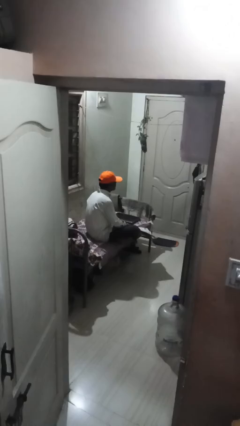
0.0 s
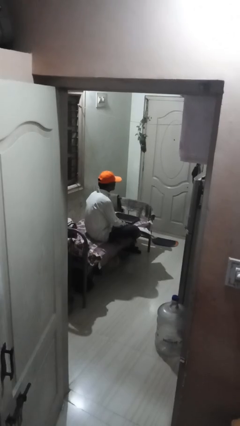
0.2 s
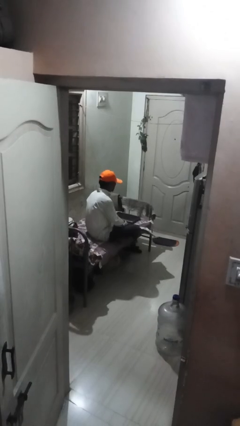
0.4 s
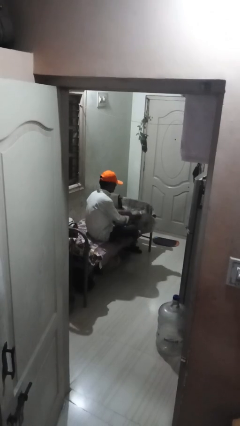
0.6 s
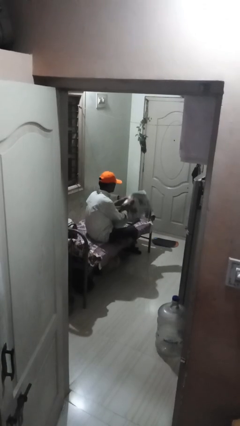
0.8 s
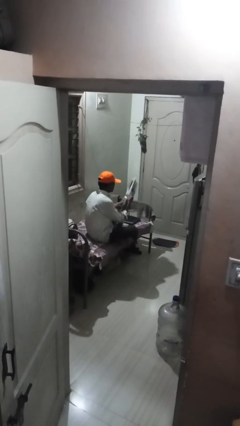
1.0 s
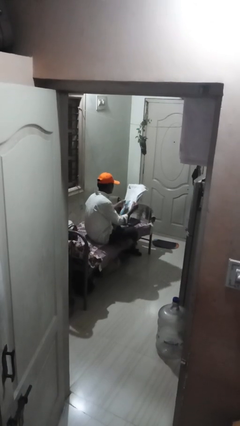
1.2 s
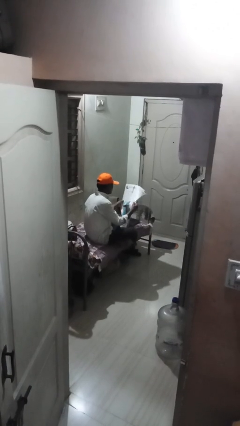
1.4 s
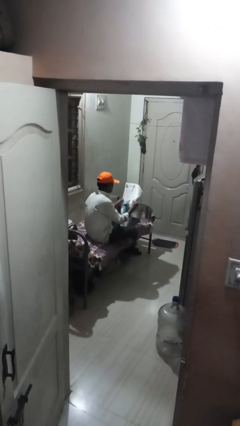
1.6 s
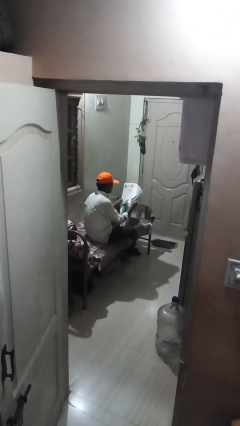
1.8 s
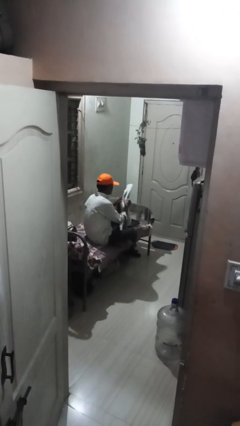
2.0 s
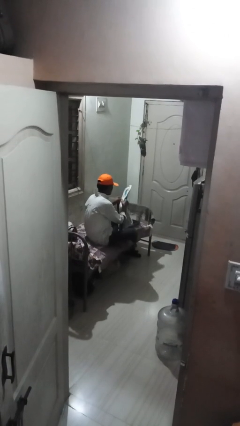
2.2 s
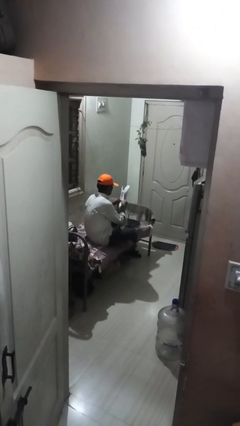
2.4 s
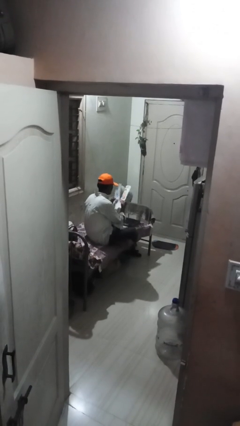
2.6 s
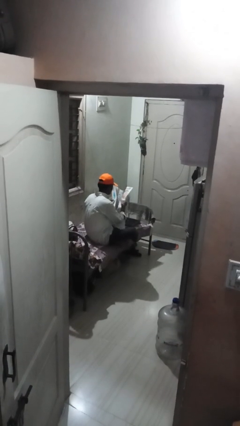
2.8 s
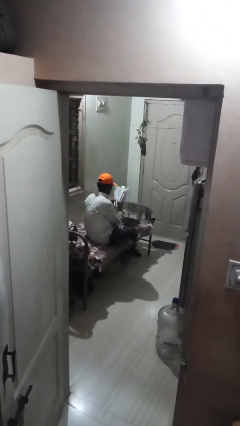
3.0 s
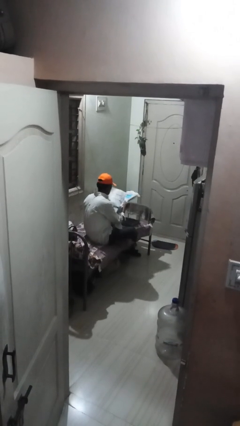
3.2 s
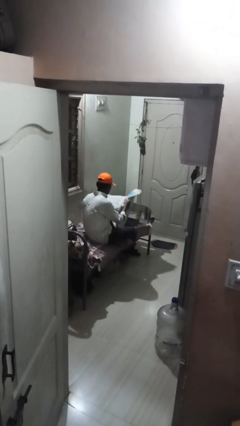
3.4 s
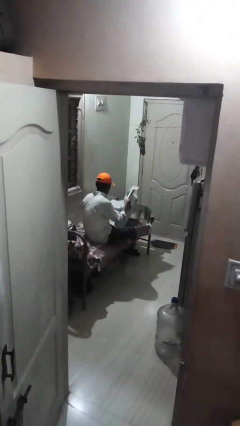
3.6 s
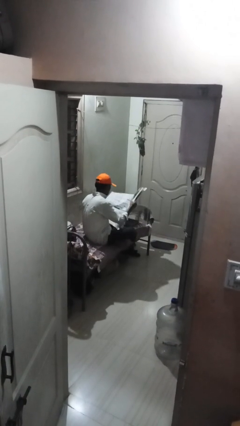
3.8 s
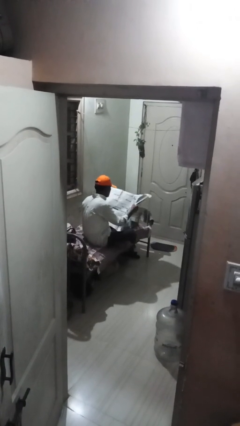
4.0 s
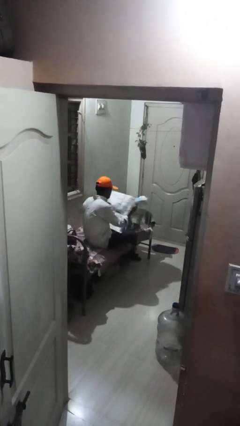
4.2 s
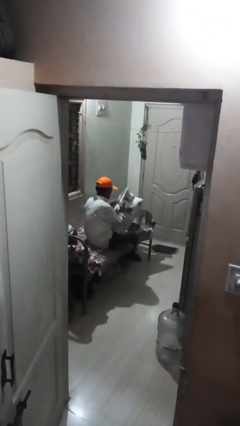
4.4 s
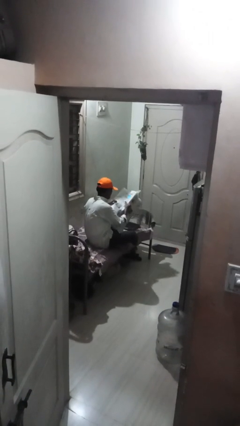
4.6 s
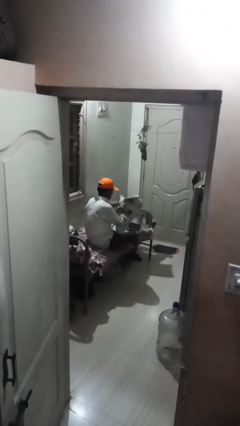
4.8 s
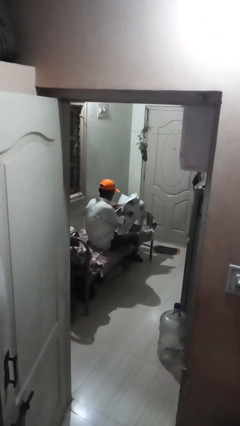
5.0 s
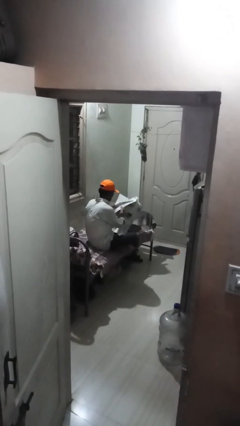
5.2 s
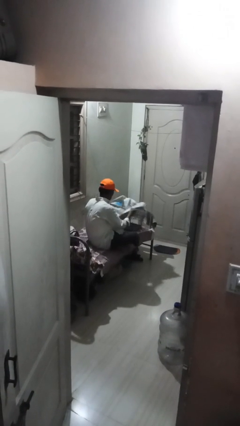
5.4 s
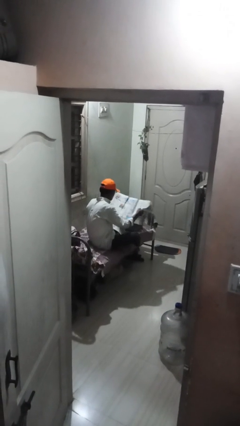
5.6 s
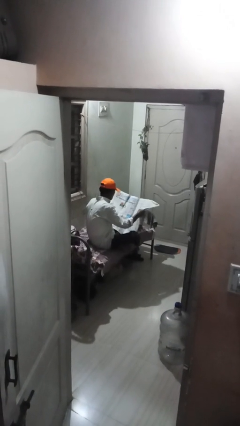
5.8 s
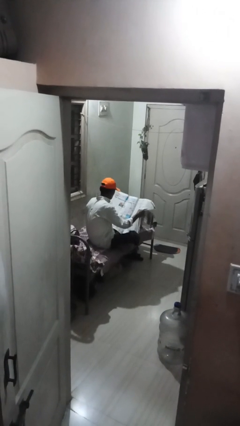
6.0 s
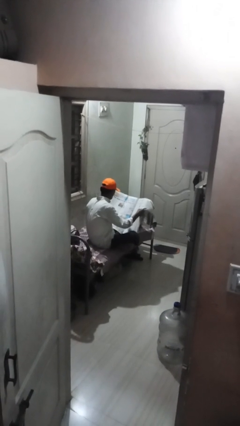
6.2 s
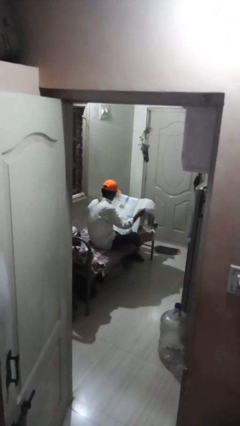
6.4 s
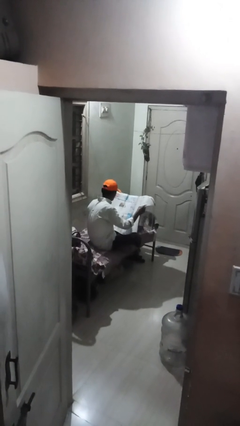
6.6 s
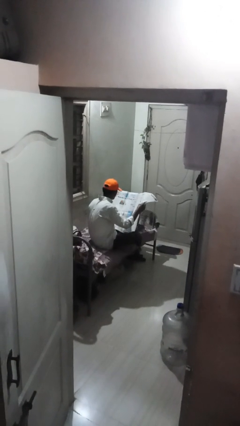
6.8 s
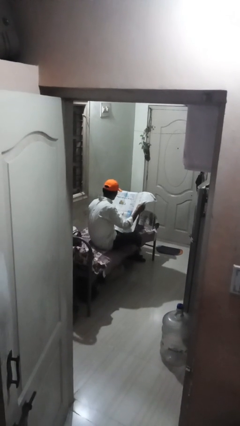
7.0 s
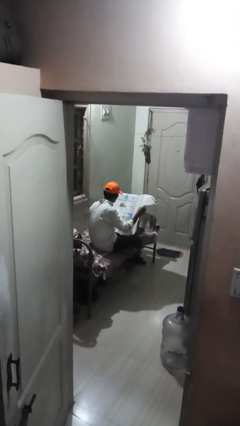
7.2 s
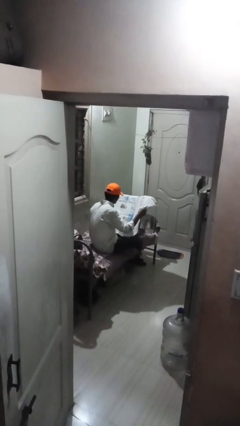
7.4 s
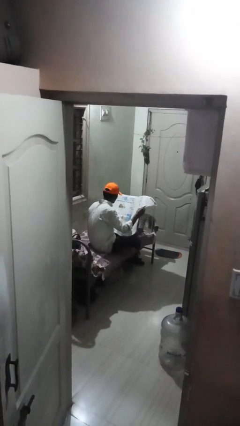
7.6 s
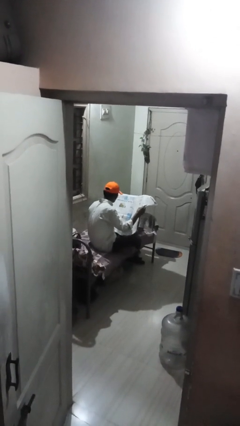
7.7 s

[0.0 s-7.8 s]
person reads newspaper

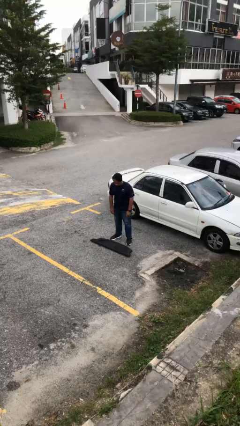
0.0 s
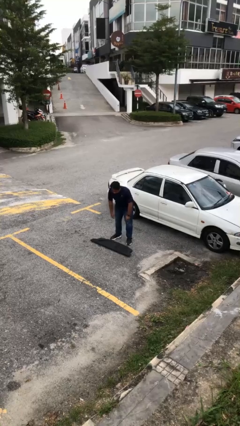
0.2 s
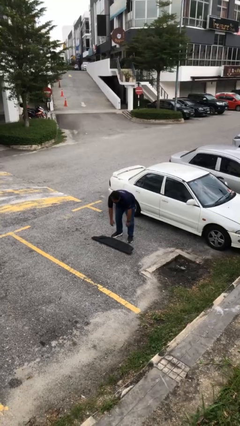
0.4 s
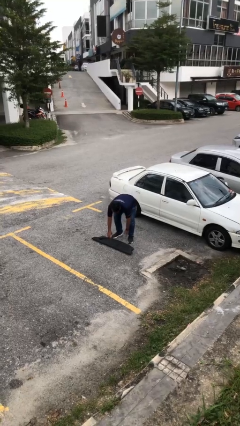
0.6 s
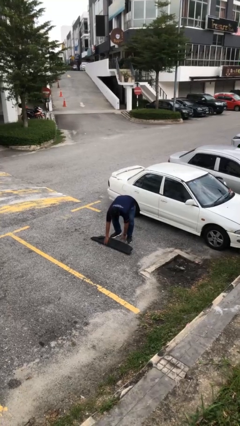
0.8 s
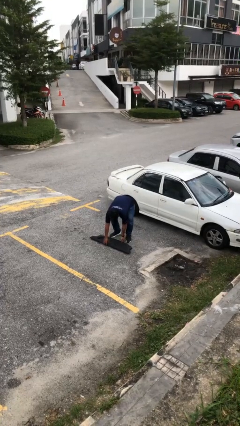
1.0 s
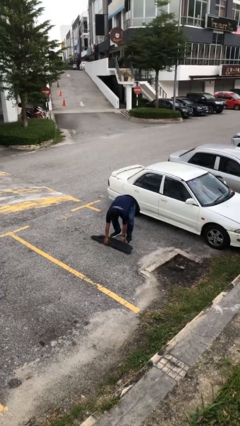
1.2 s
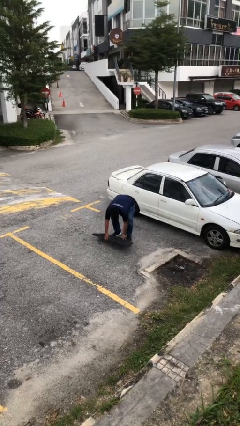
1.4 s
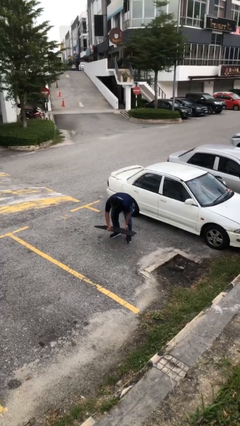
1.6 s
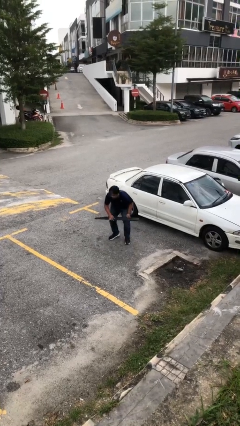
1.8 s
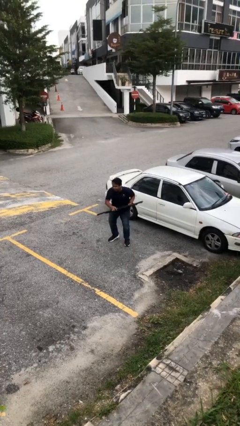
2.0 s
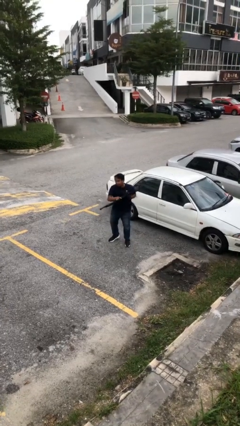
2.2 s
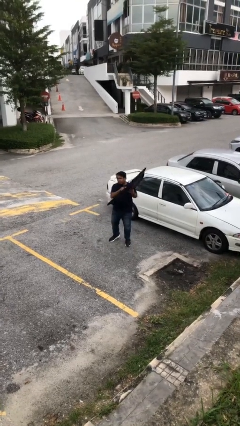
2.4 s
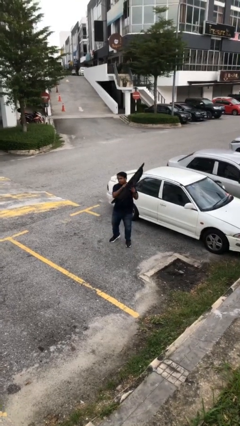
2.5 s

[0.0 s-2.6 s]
person picks up object from floor

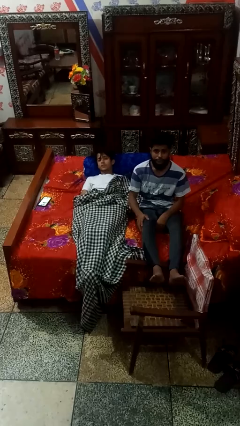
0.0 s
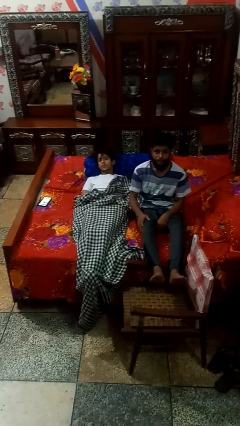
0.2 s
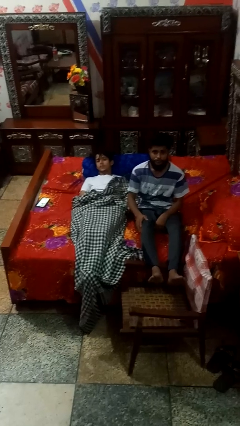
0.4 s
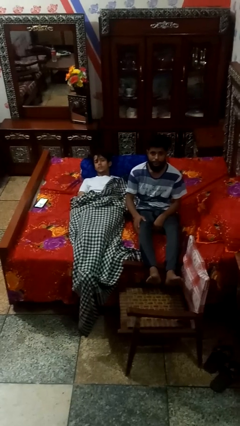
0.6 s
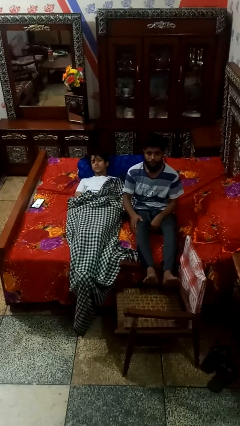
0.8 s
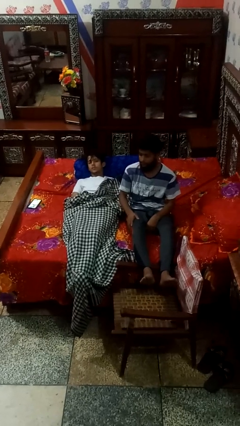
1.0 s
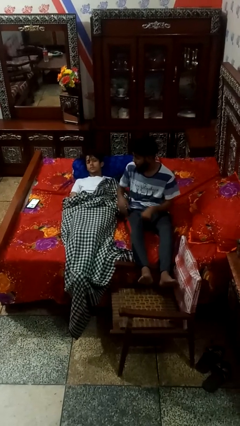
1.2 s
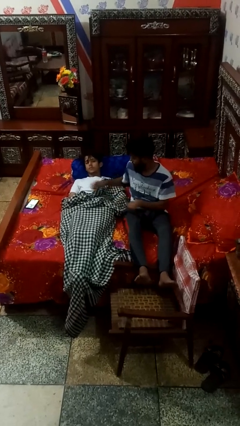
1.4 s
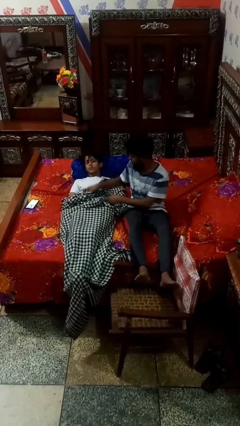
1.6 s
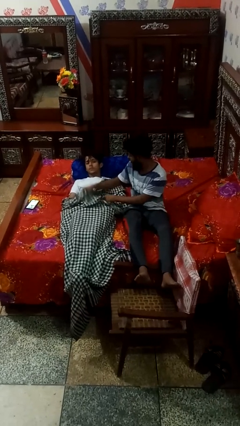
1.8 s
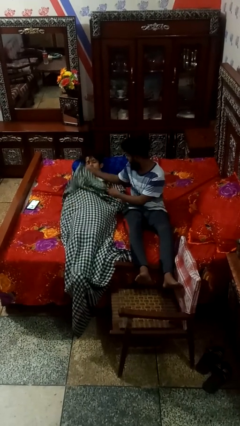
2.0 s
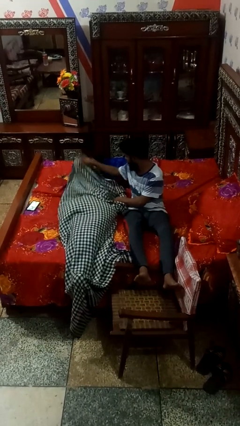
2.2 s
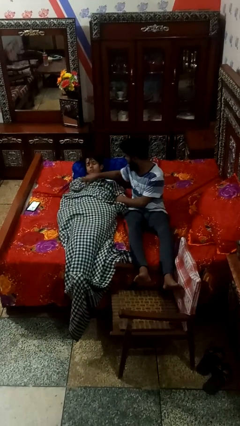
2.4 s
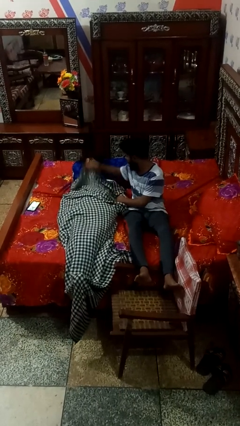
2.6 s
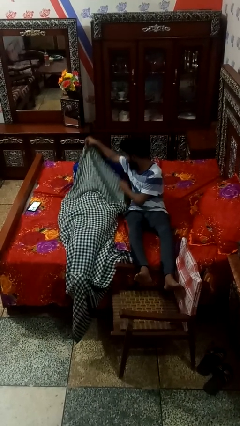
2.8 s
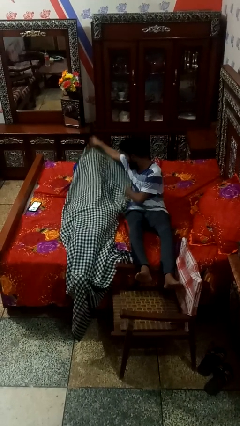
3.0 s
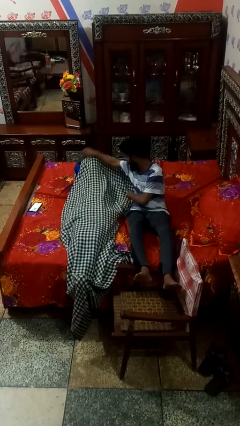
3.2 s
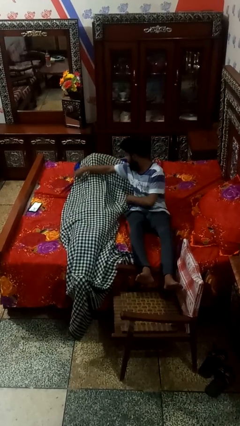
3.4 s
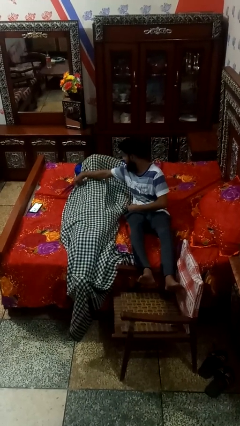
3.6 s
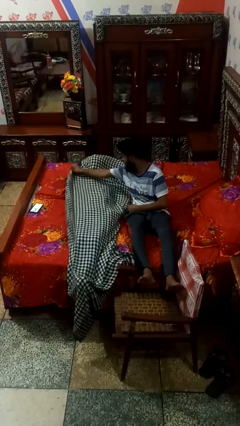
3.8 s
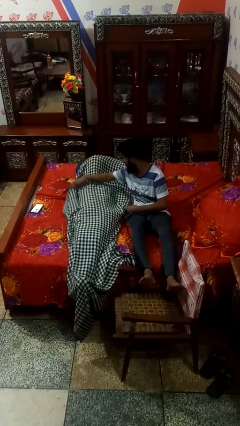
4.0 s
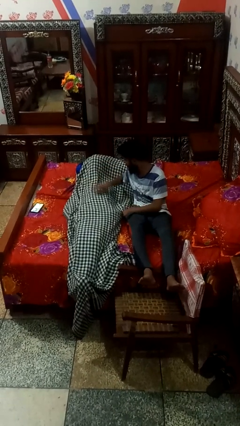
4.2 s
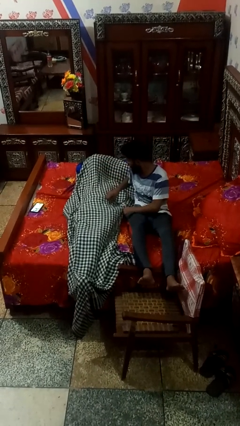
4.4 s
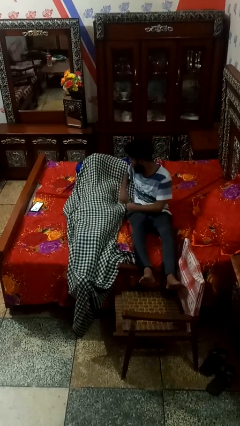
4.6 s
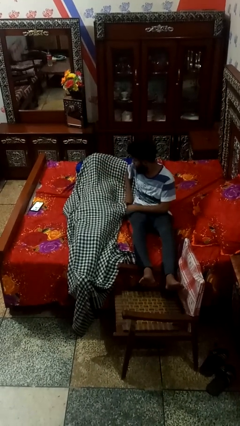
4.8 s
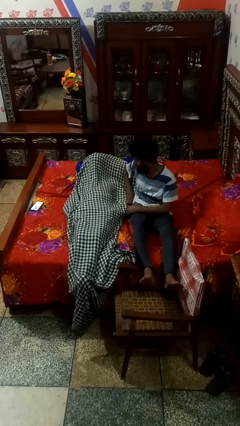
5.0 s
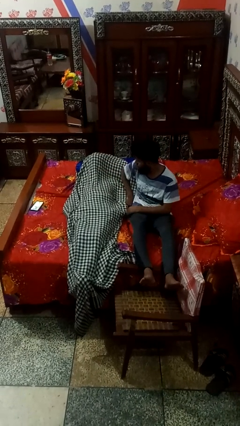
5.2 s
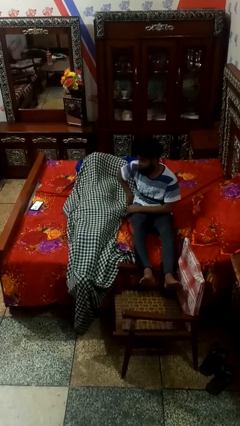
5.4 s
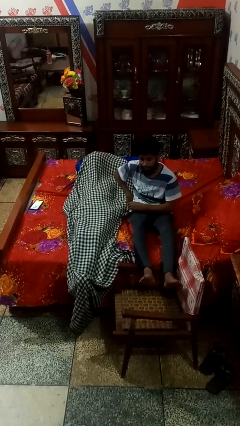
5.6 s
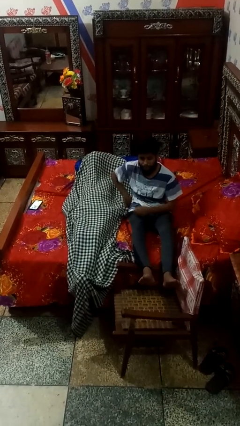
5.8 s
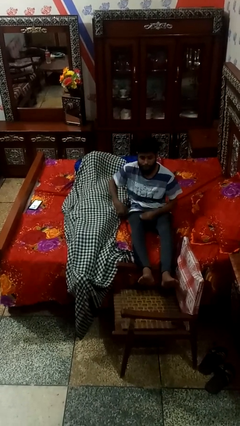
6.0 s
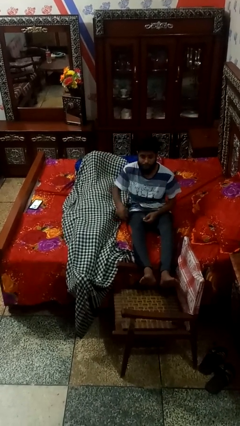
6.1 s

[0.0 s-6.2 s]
person covers friend with blanket

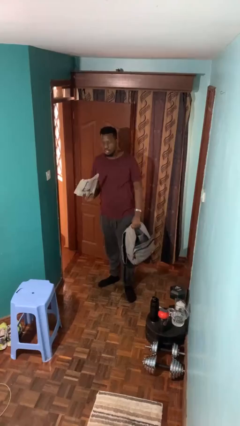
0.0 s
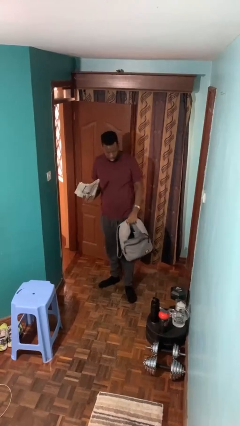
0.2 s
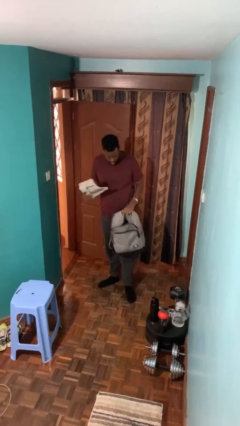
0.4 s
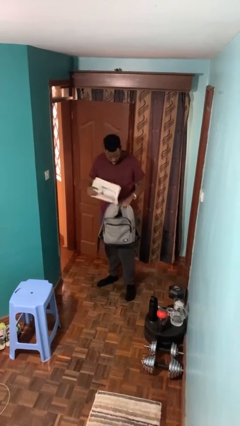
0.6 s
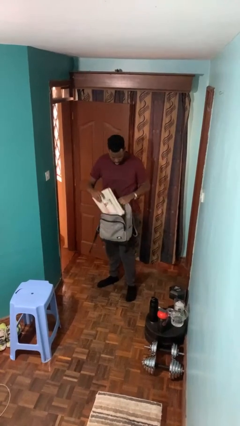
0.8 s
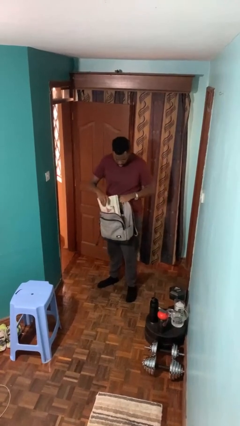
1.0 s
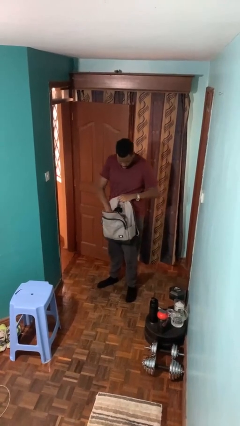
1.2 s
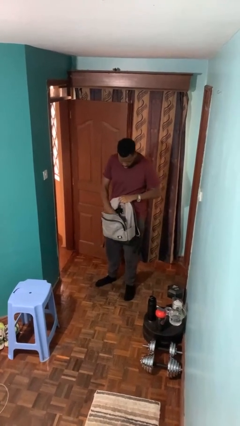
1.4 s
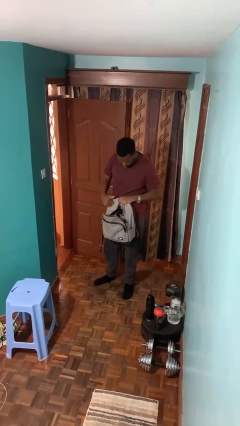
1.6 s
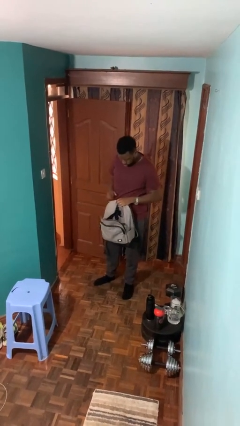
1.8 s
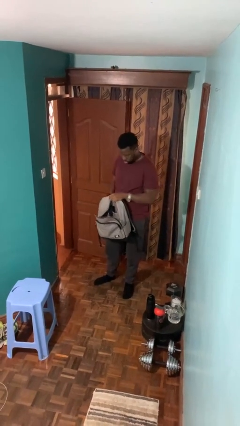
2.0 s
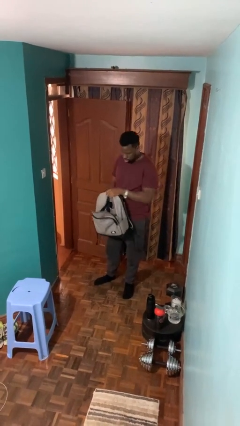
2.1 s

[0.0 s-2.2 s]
person puts object into backpack
